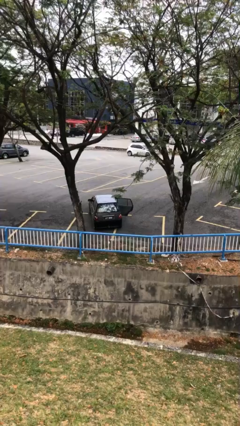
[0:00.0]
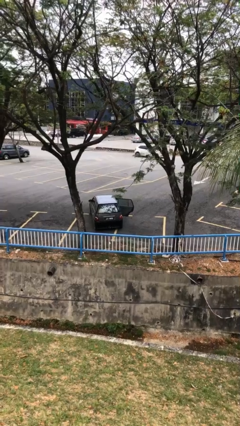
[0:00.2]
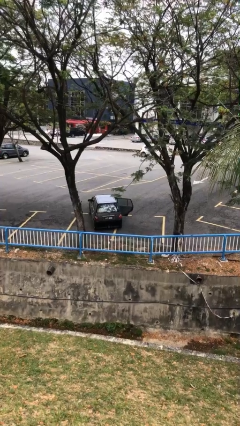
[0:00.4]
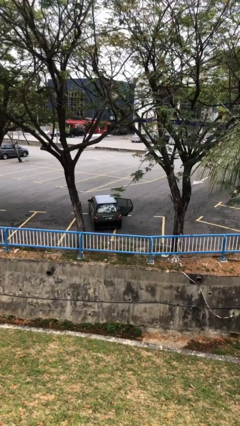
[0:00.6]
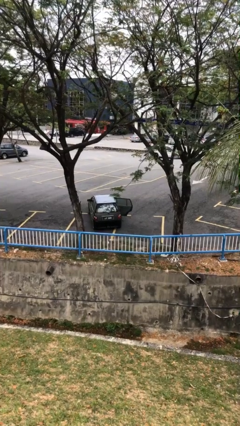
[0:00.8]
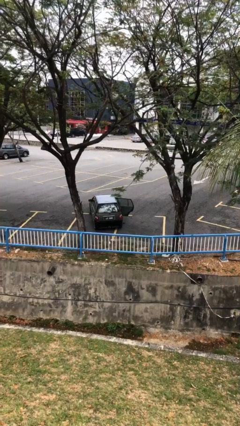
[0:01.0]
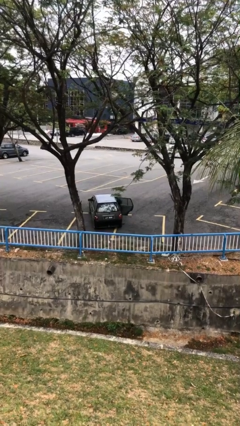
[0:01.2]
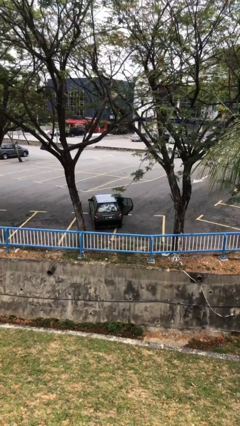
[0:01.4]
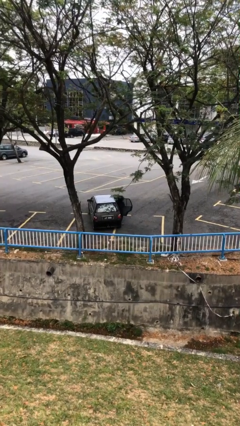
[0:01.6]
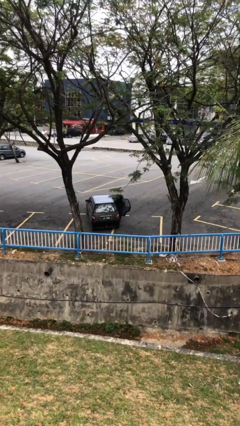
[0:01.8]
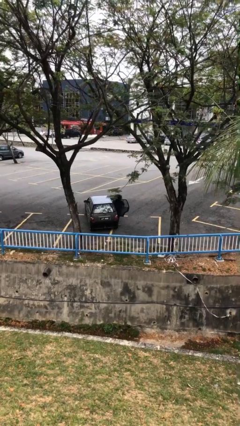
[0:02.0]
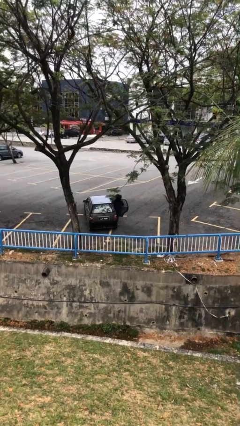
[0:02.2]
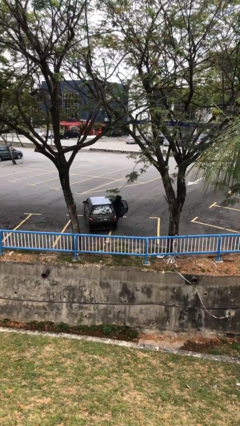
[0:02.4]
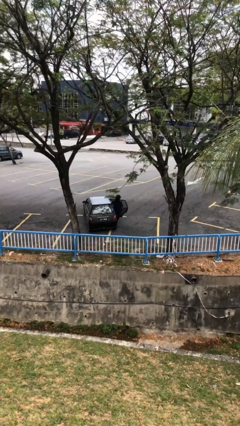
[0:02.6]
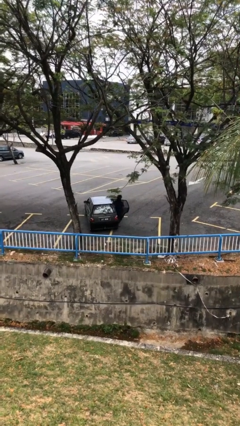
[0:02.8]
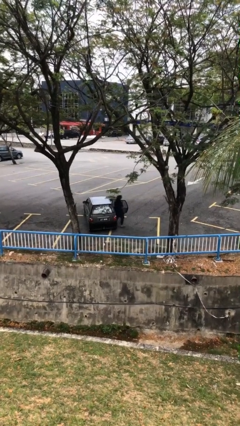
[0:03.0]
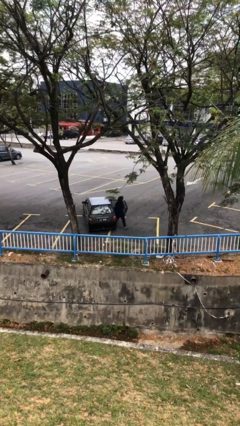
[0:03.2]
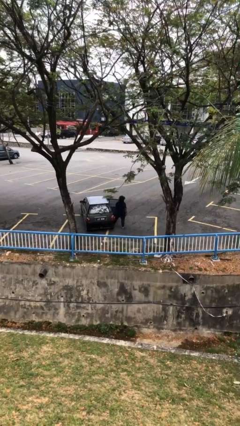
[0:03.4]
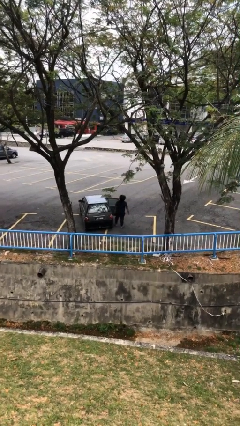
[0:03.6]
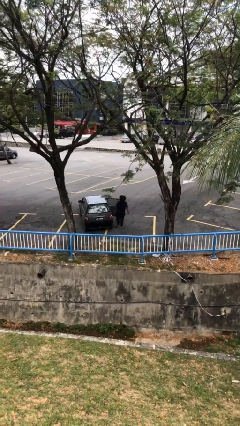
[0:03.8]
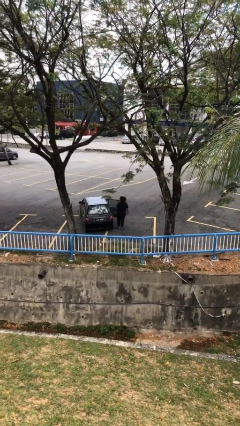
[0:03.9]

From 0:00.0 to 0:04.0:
person exits car

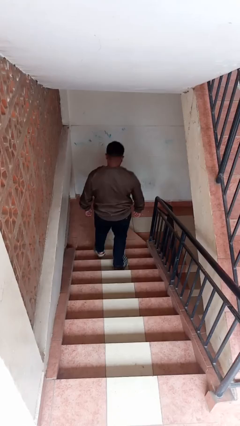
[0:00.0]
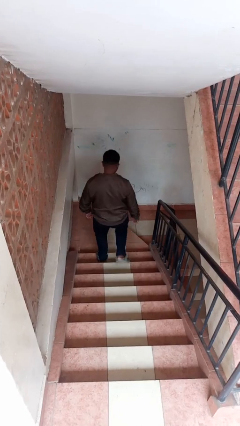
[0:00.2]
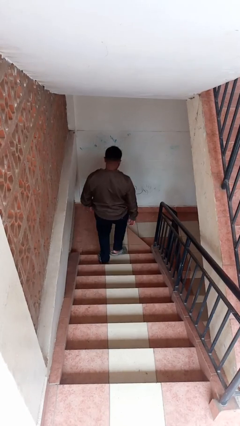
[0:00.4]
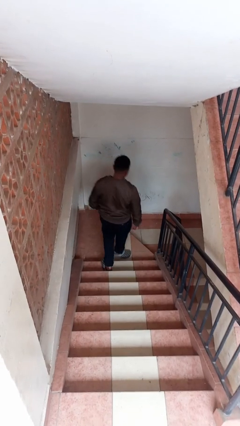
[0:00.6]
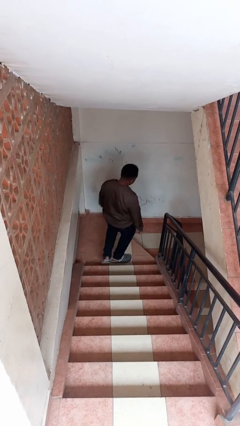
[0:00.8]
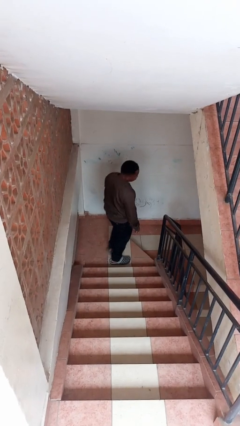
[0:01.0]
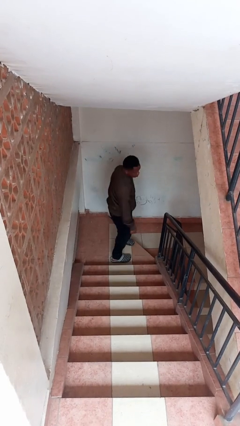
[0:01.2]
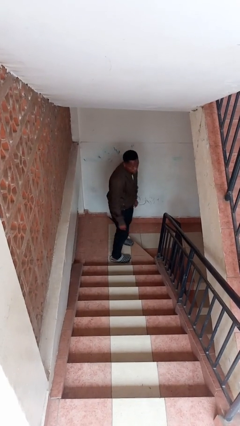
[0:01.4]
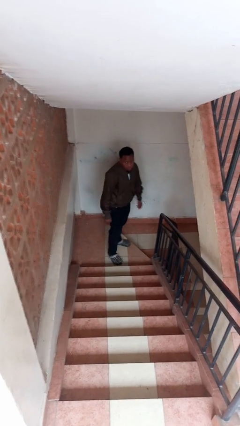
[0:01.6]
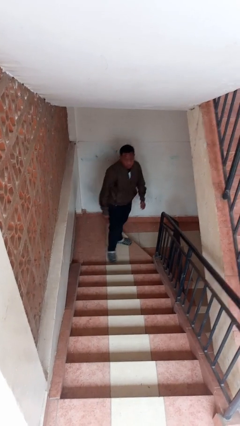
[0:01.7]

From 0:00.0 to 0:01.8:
person climbs down stairs

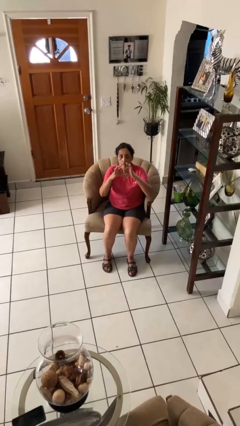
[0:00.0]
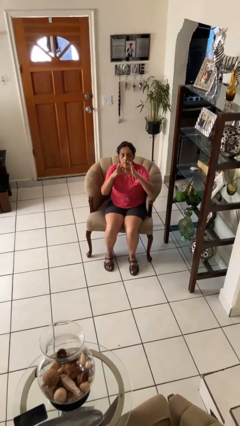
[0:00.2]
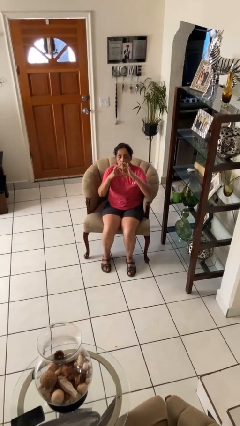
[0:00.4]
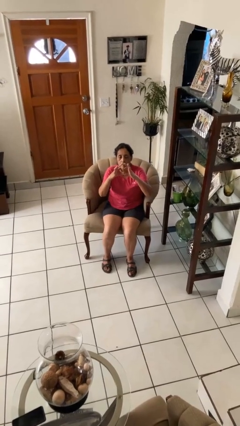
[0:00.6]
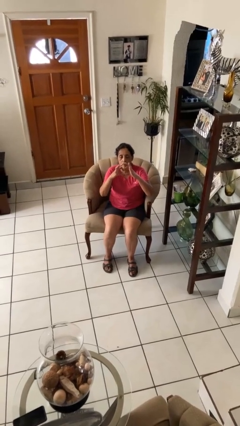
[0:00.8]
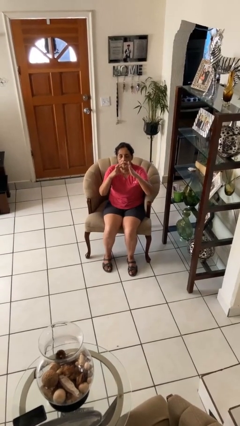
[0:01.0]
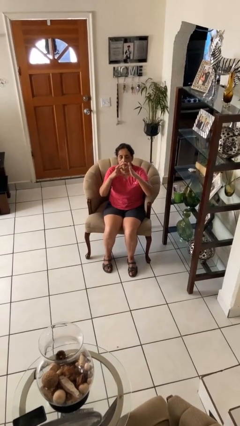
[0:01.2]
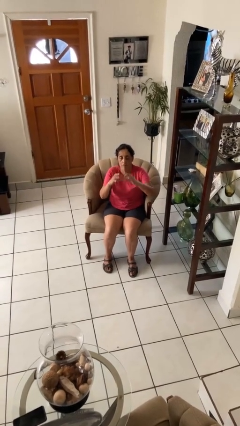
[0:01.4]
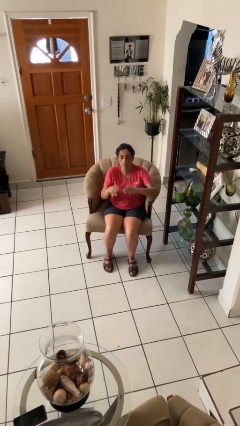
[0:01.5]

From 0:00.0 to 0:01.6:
person gestures heart

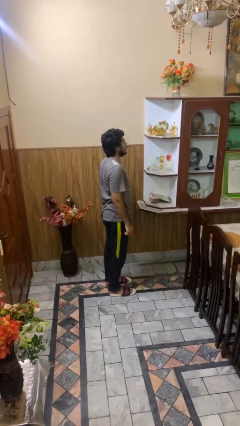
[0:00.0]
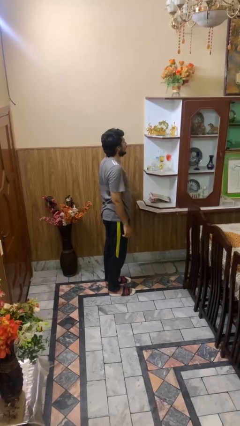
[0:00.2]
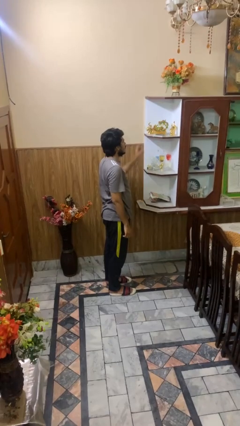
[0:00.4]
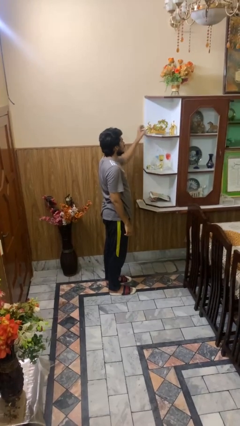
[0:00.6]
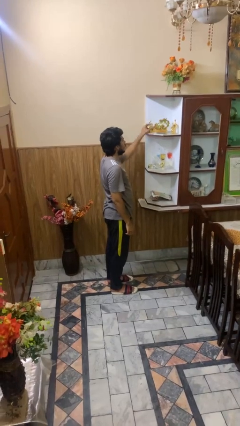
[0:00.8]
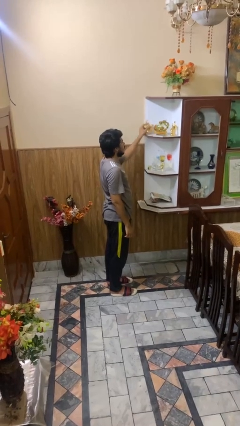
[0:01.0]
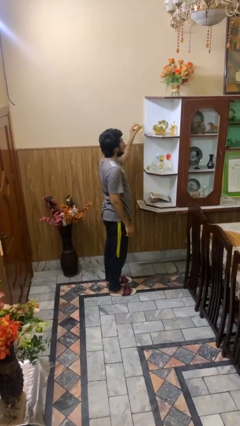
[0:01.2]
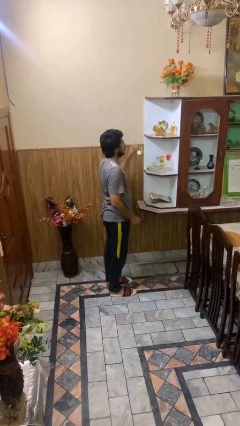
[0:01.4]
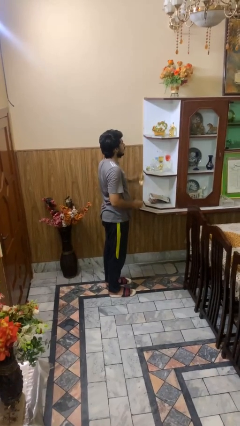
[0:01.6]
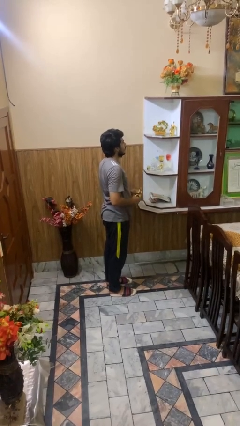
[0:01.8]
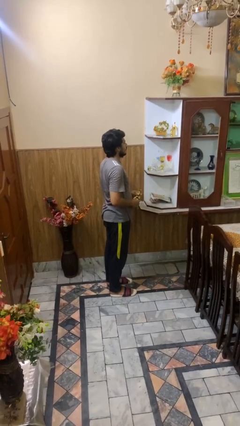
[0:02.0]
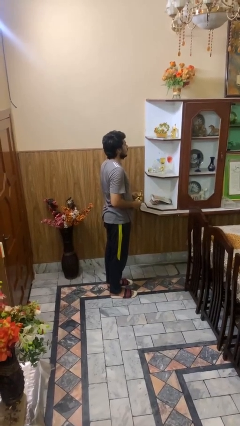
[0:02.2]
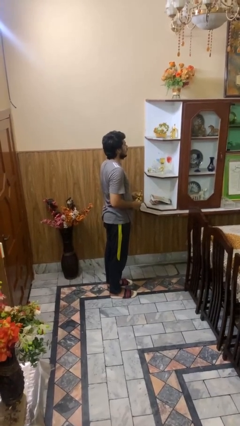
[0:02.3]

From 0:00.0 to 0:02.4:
person picks up object from shelf

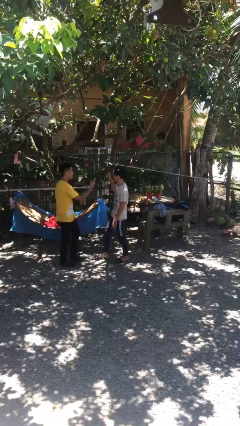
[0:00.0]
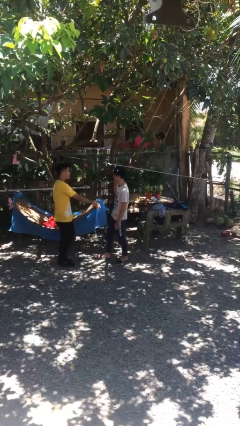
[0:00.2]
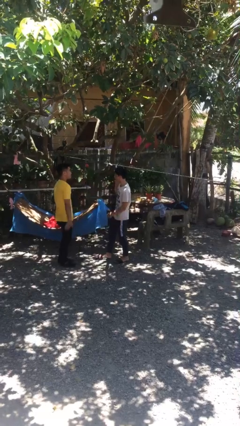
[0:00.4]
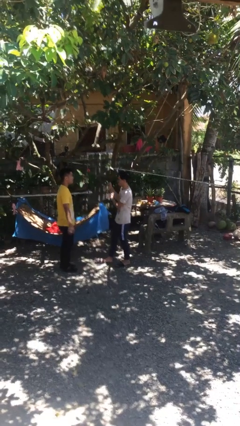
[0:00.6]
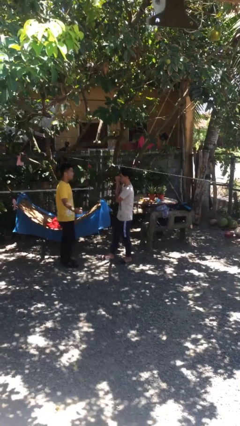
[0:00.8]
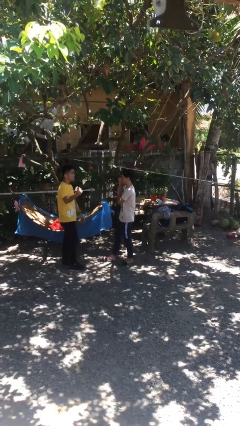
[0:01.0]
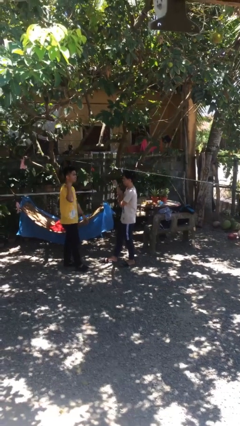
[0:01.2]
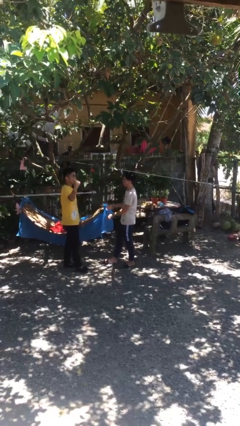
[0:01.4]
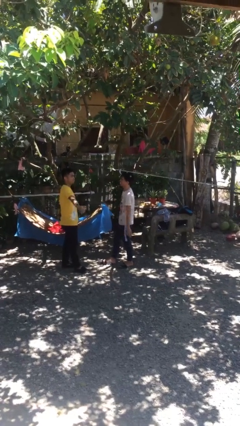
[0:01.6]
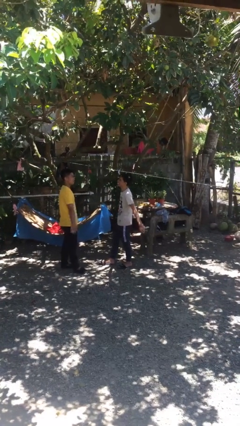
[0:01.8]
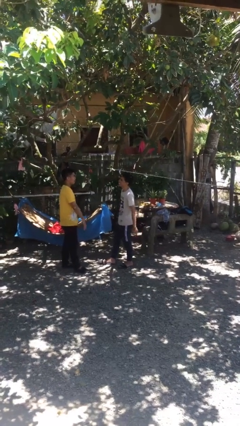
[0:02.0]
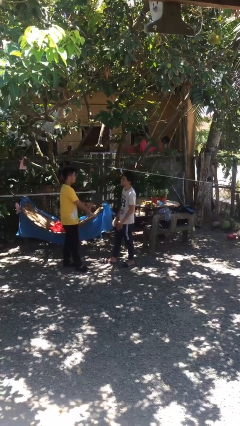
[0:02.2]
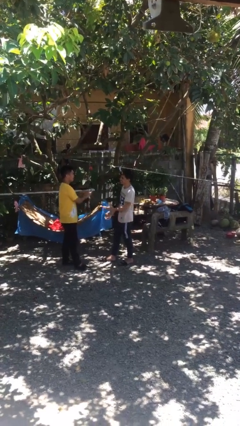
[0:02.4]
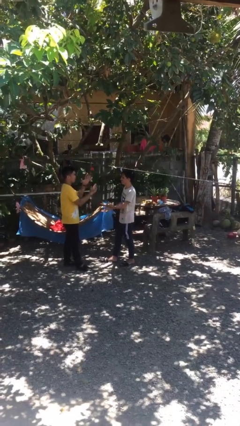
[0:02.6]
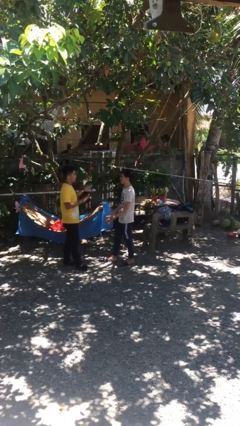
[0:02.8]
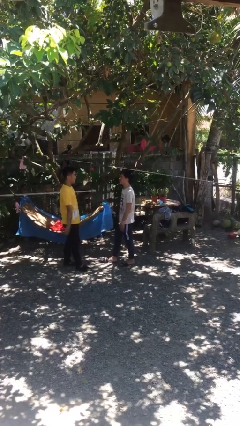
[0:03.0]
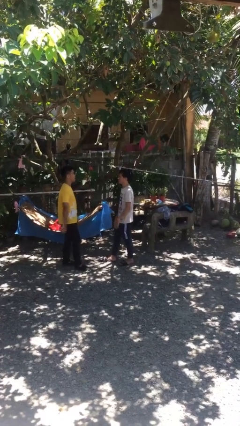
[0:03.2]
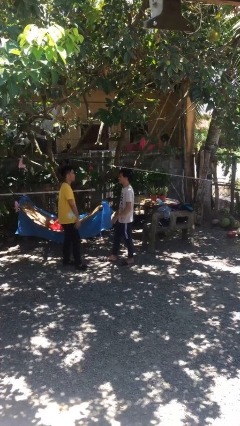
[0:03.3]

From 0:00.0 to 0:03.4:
person talks to person

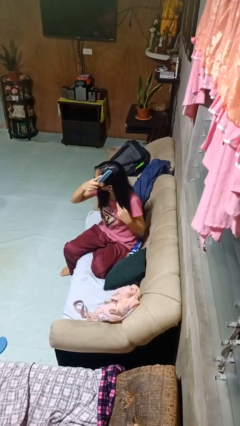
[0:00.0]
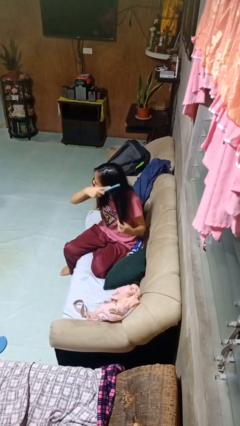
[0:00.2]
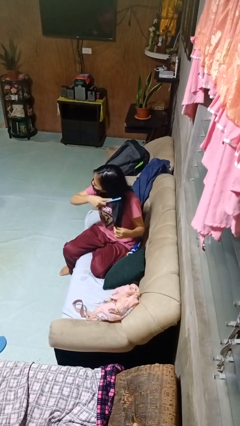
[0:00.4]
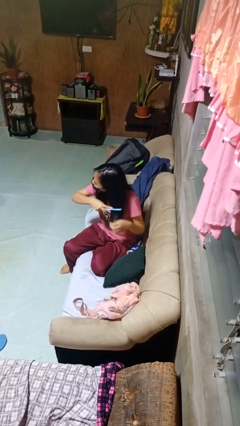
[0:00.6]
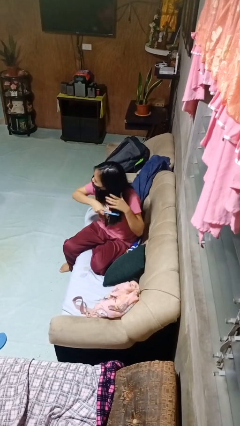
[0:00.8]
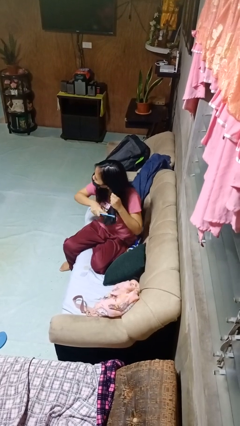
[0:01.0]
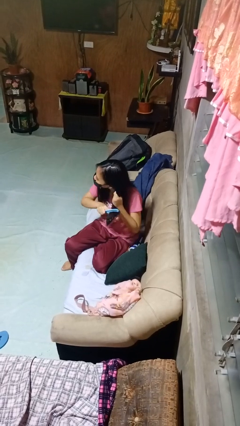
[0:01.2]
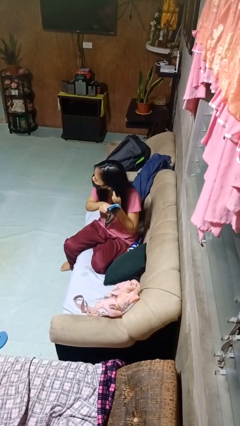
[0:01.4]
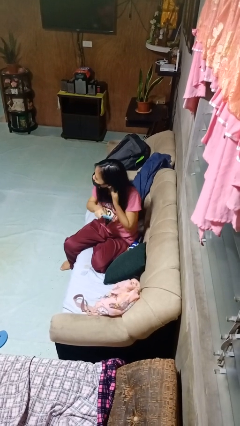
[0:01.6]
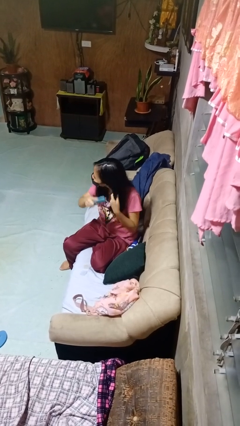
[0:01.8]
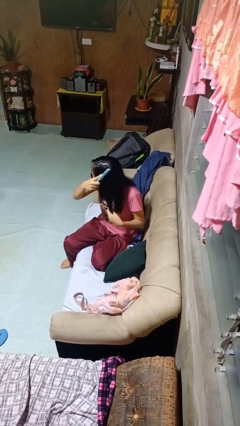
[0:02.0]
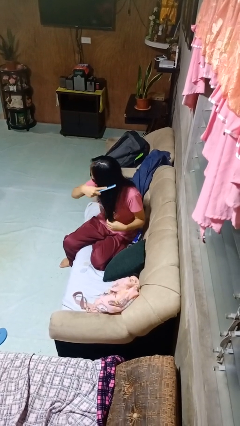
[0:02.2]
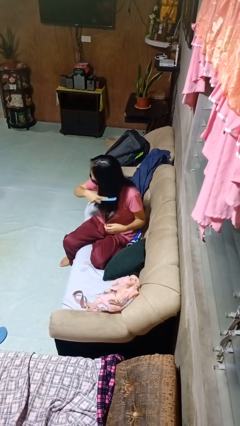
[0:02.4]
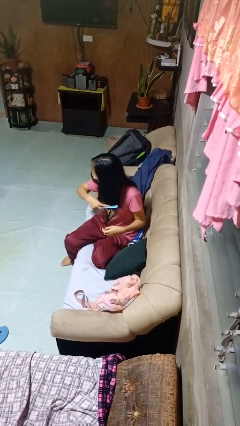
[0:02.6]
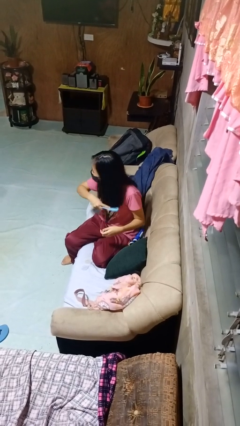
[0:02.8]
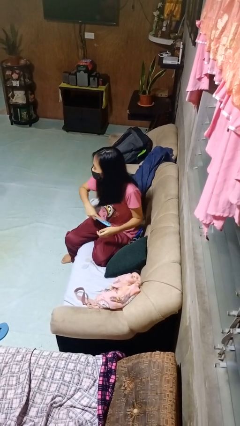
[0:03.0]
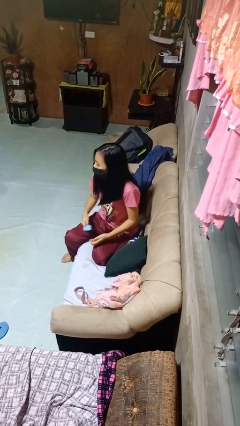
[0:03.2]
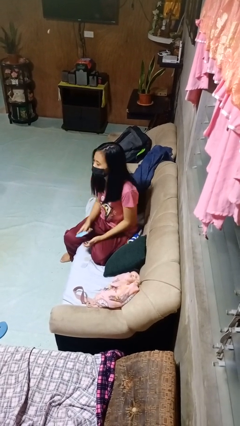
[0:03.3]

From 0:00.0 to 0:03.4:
person brushes hair

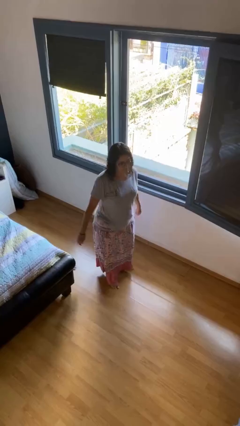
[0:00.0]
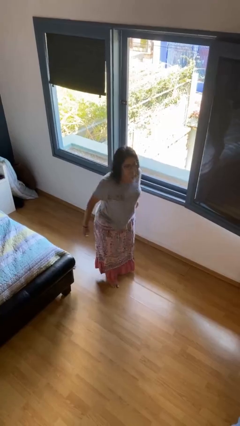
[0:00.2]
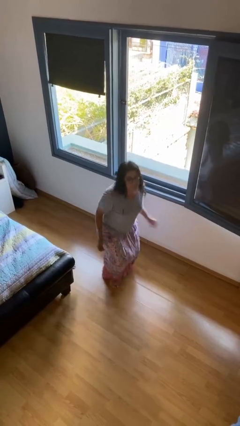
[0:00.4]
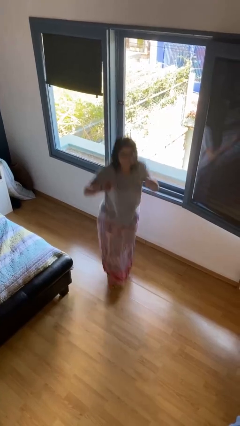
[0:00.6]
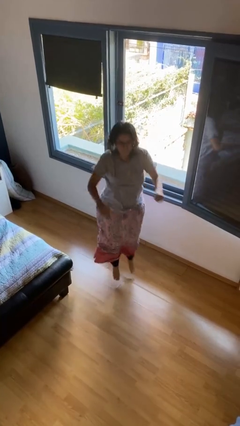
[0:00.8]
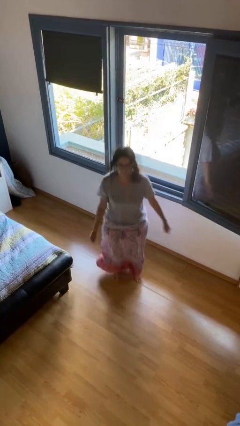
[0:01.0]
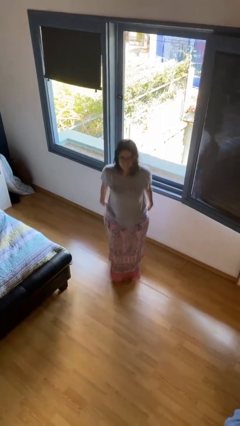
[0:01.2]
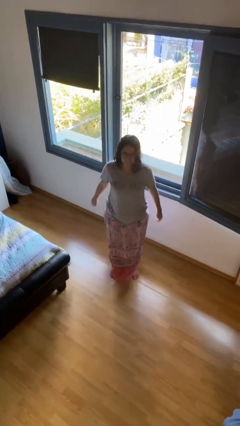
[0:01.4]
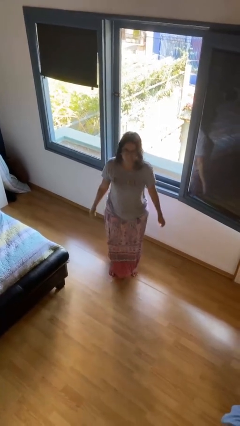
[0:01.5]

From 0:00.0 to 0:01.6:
person jumps
